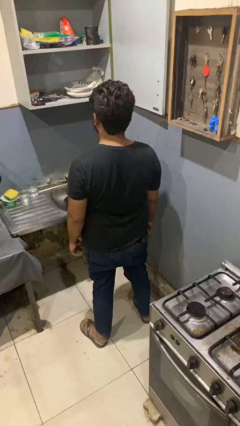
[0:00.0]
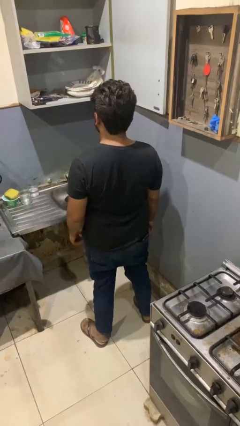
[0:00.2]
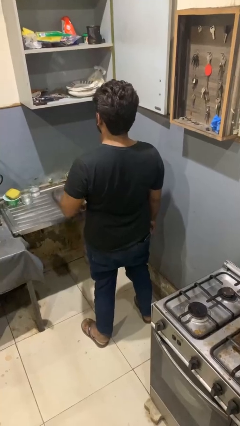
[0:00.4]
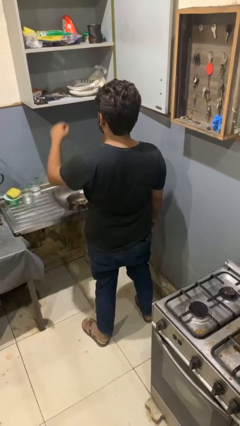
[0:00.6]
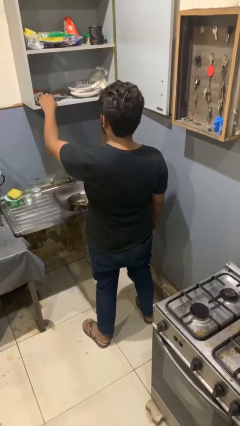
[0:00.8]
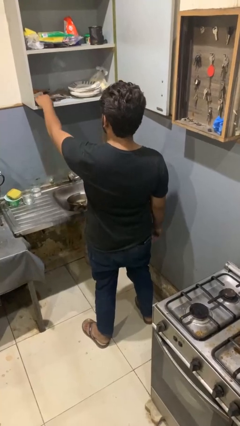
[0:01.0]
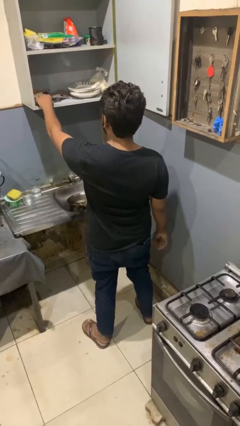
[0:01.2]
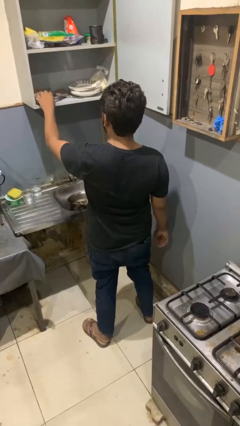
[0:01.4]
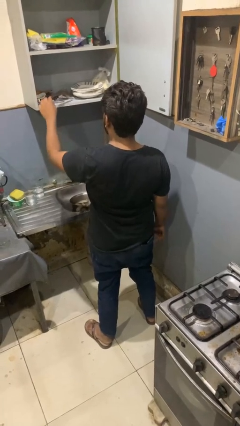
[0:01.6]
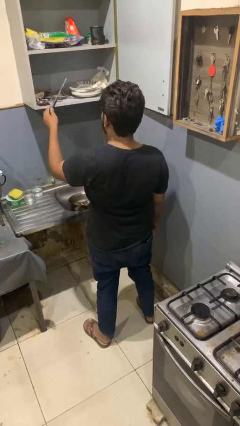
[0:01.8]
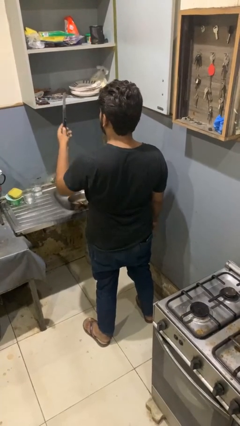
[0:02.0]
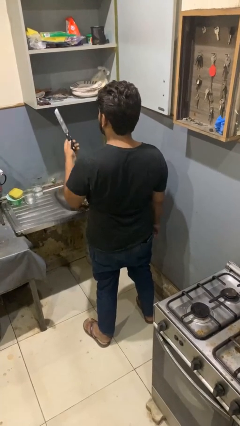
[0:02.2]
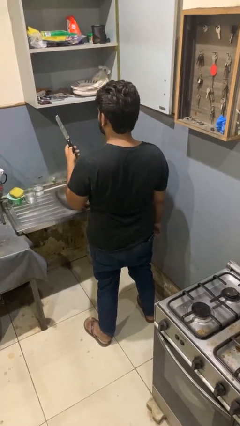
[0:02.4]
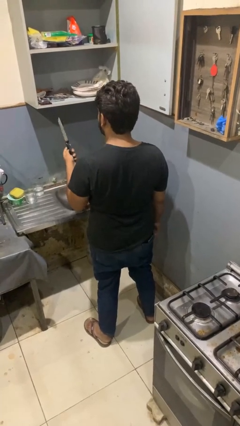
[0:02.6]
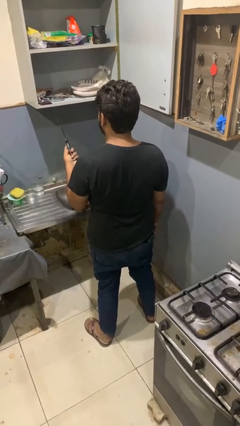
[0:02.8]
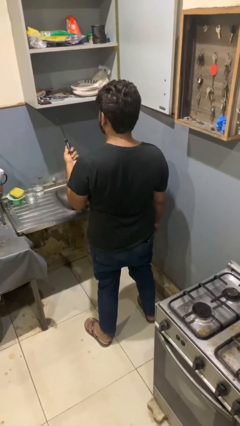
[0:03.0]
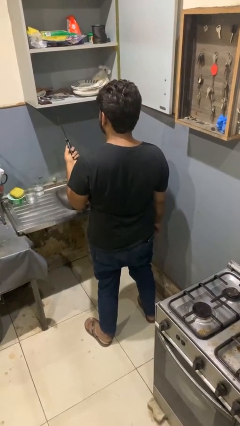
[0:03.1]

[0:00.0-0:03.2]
person takes object from kitchen drawer

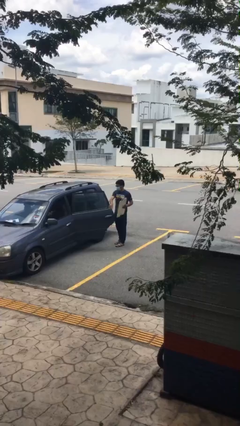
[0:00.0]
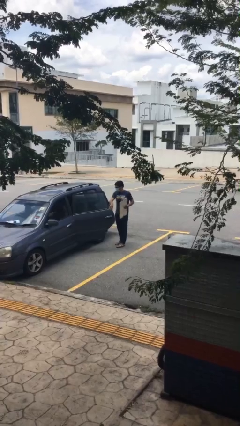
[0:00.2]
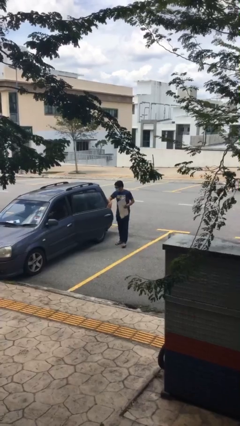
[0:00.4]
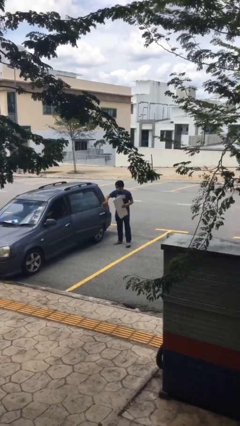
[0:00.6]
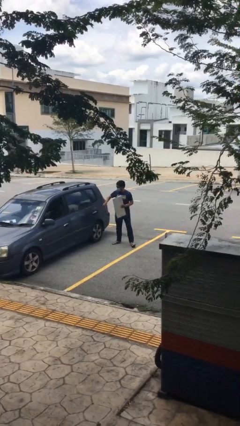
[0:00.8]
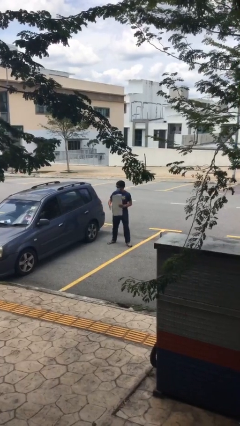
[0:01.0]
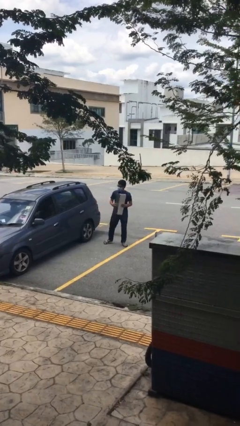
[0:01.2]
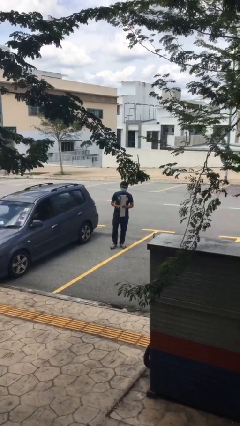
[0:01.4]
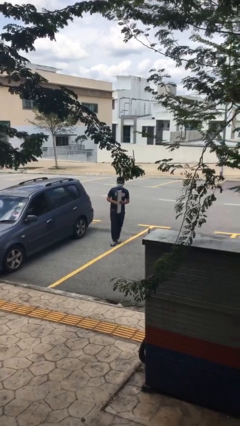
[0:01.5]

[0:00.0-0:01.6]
person closes car door

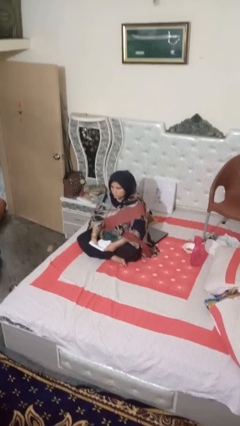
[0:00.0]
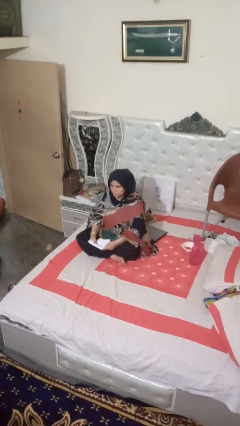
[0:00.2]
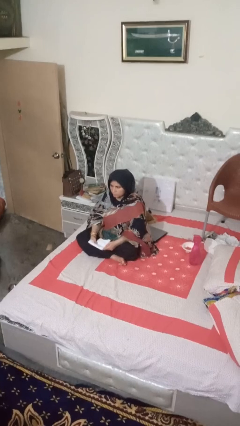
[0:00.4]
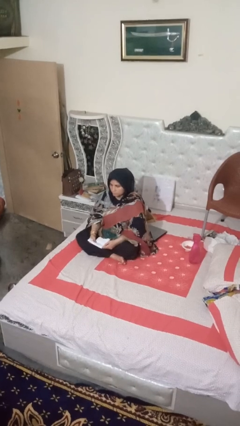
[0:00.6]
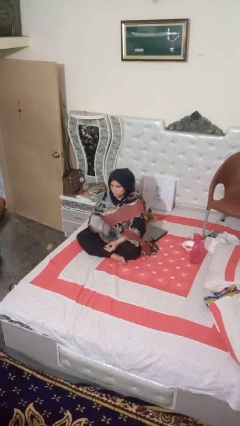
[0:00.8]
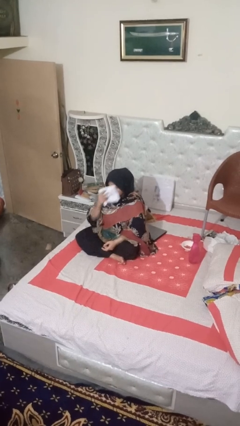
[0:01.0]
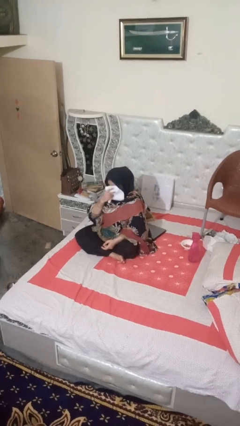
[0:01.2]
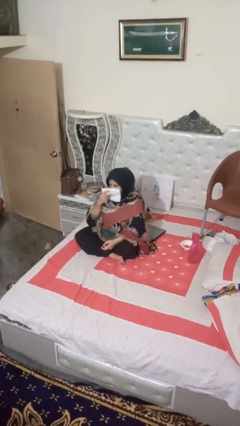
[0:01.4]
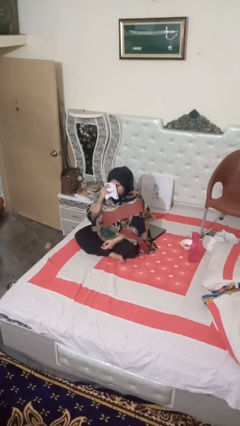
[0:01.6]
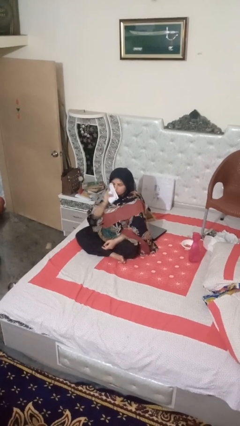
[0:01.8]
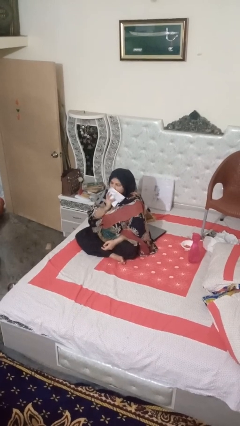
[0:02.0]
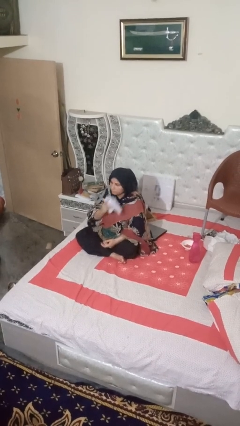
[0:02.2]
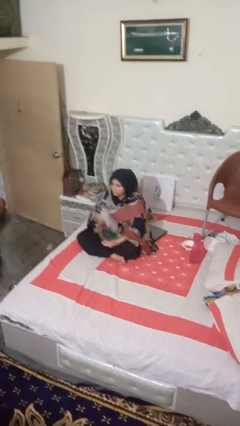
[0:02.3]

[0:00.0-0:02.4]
person wipes mouth with napkin

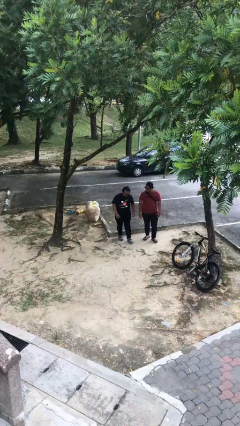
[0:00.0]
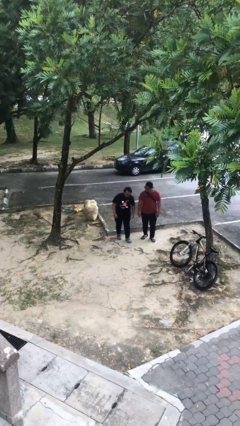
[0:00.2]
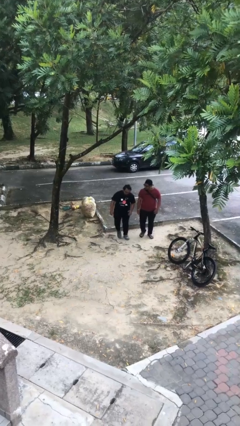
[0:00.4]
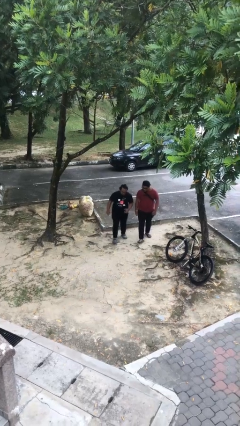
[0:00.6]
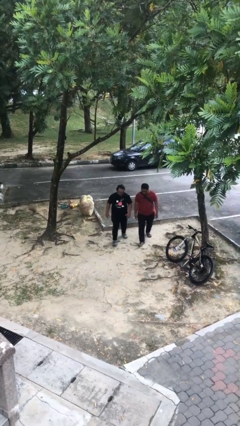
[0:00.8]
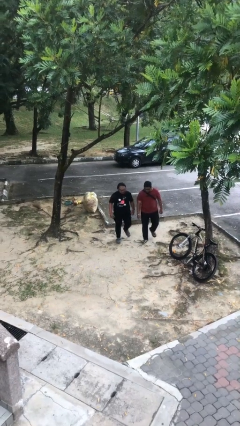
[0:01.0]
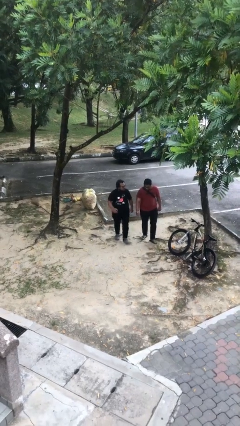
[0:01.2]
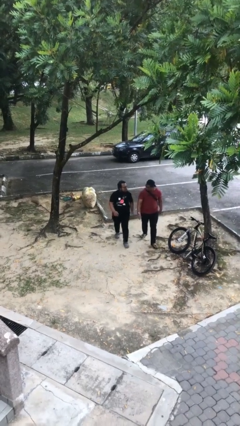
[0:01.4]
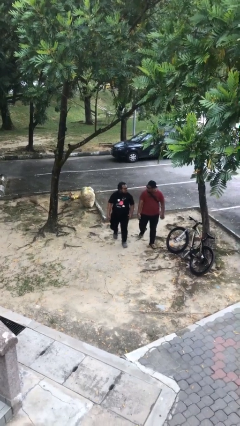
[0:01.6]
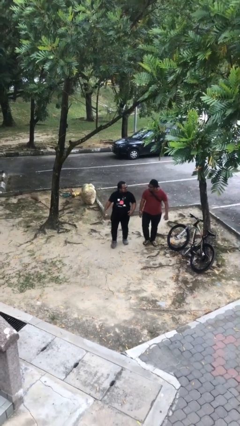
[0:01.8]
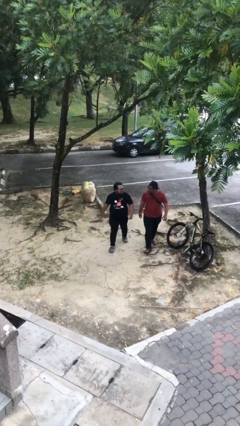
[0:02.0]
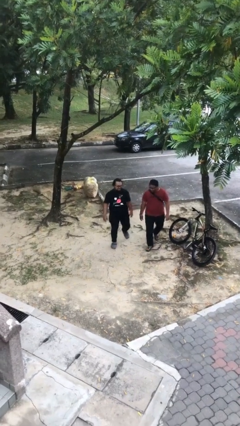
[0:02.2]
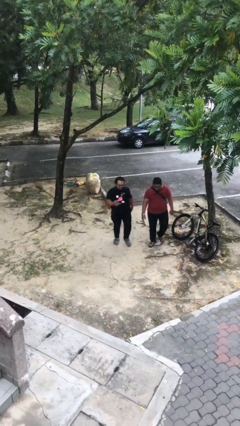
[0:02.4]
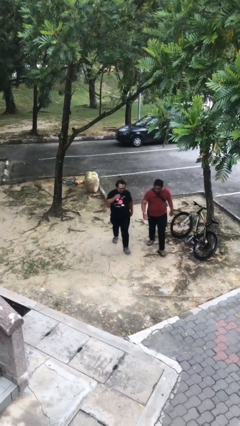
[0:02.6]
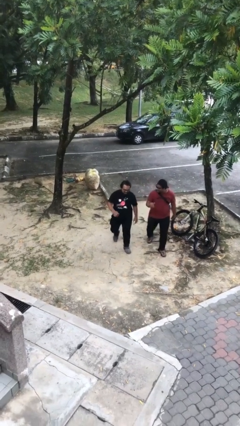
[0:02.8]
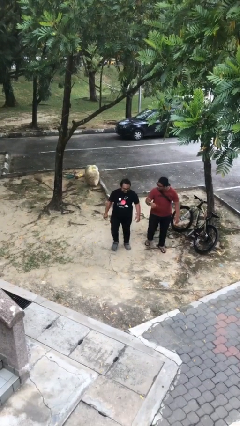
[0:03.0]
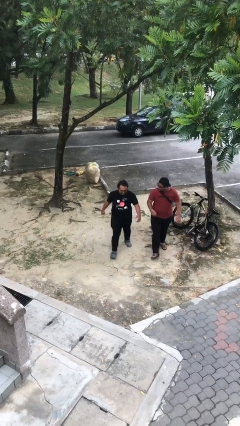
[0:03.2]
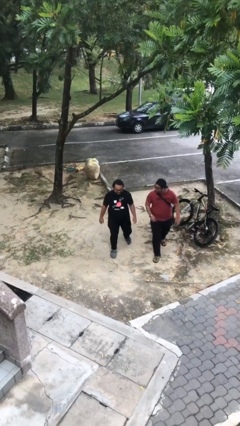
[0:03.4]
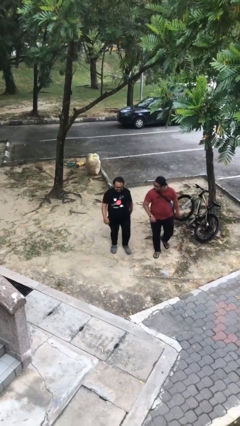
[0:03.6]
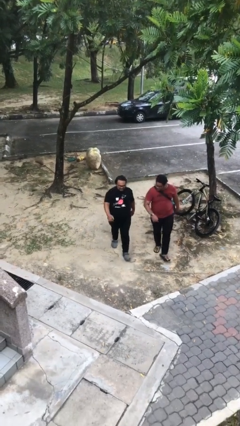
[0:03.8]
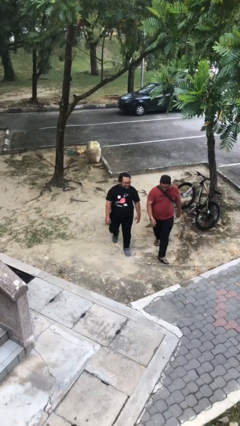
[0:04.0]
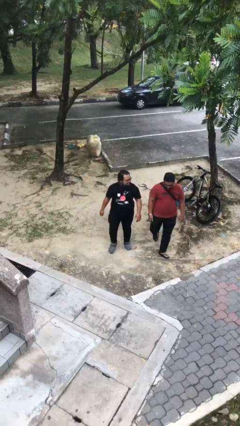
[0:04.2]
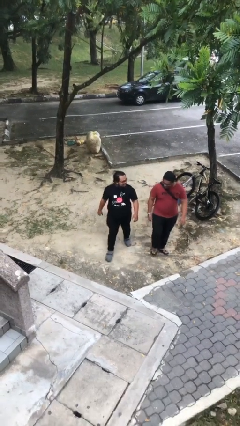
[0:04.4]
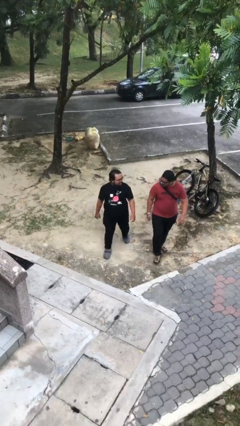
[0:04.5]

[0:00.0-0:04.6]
person talks to person

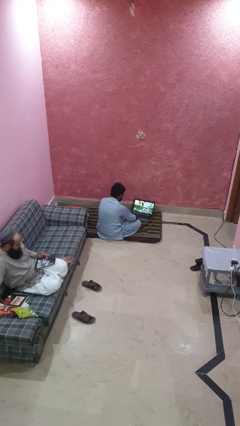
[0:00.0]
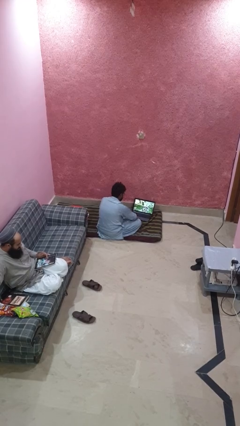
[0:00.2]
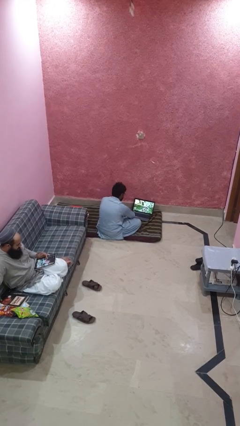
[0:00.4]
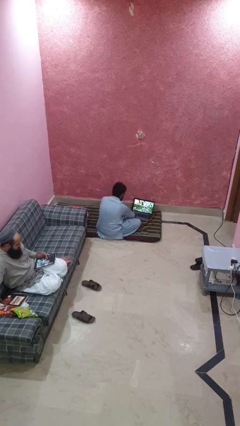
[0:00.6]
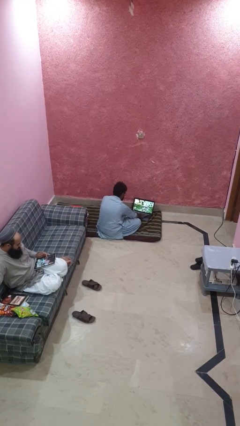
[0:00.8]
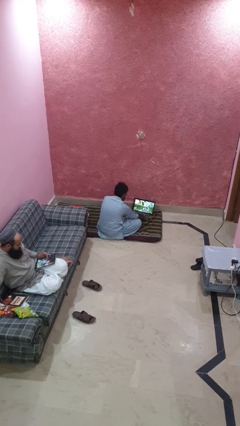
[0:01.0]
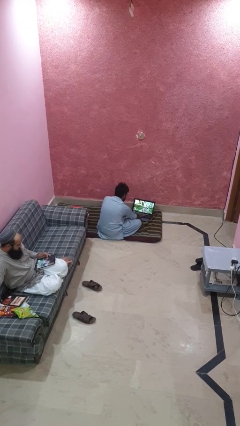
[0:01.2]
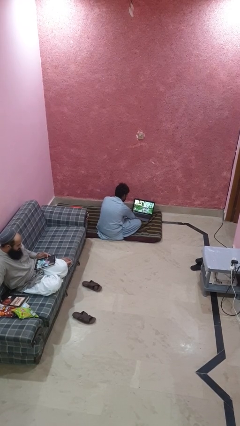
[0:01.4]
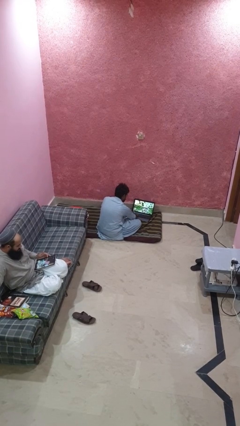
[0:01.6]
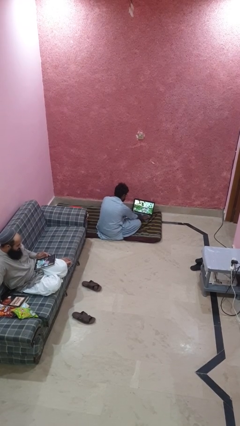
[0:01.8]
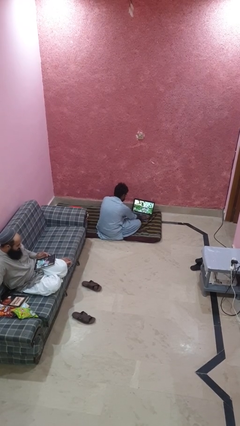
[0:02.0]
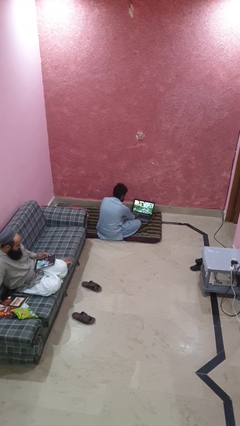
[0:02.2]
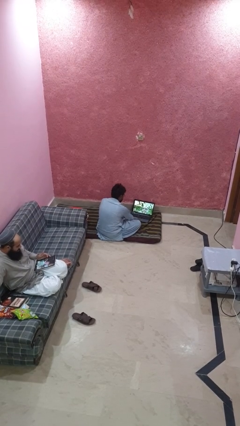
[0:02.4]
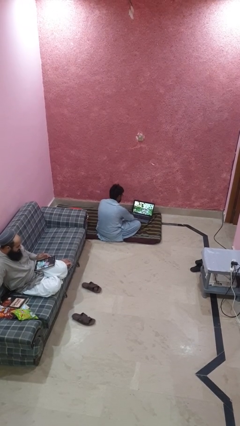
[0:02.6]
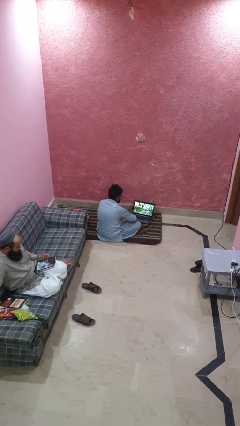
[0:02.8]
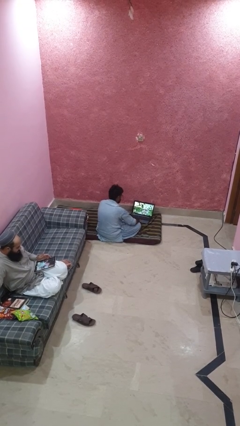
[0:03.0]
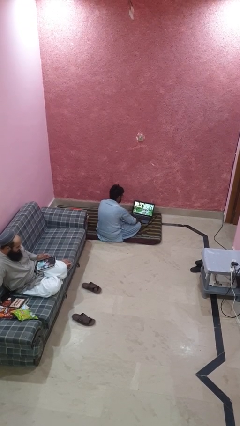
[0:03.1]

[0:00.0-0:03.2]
person waves hand over object

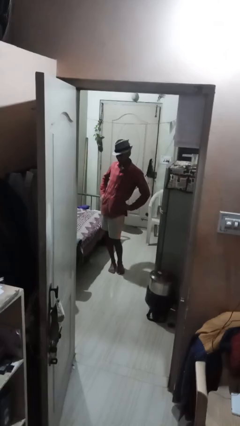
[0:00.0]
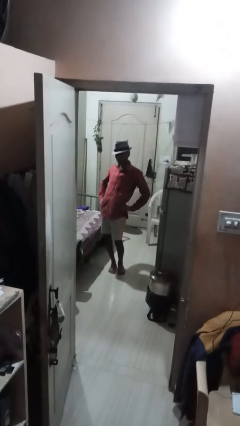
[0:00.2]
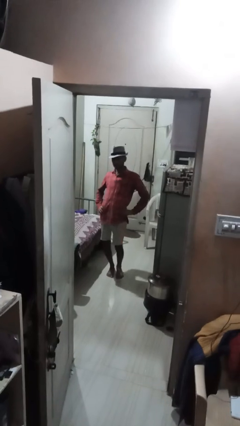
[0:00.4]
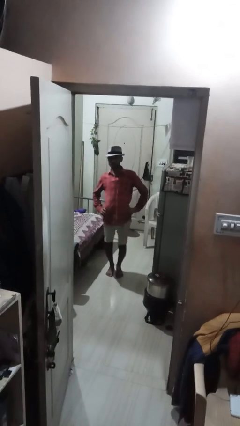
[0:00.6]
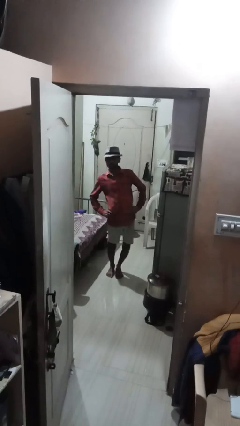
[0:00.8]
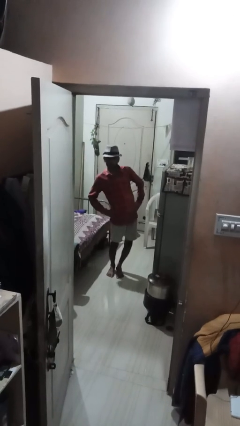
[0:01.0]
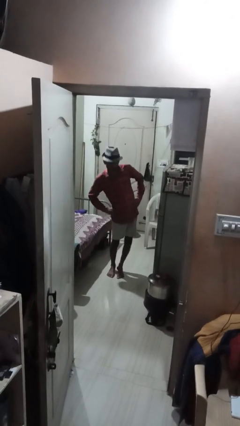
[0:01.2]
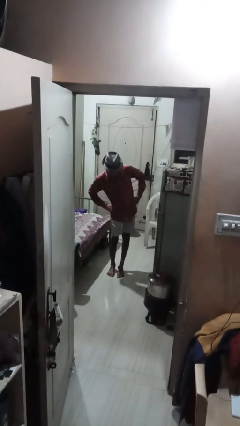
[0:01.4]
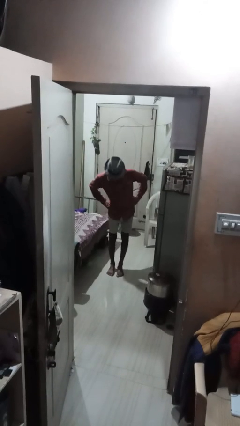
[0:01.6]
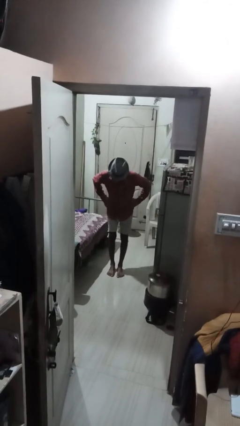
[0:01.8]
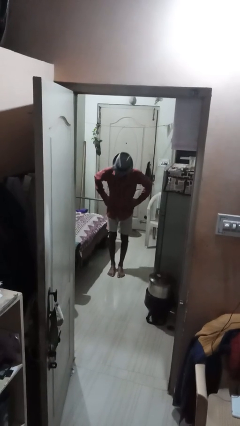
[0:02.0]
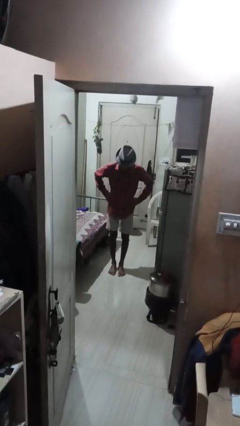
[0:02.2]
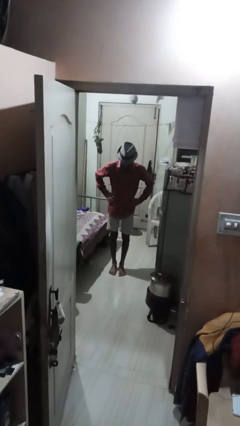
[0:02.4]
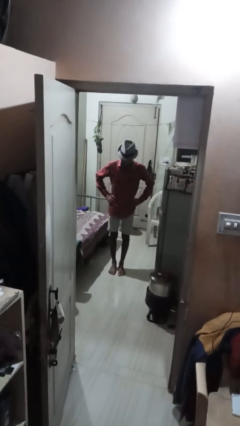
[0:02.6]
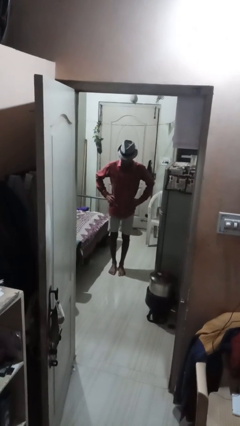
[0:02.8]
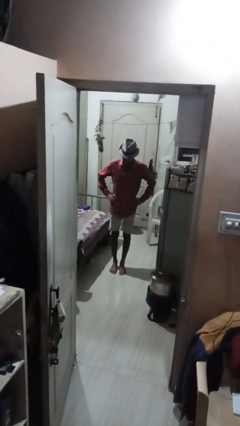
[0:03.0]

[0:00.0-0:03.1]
person wiggles hips
